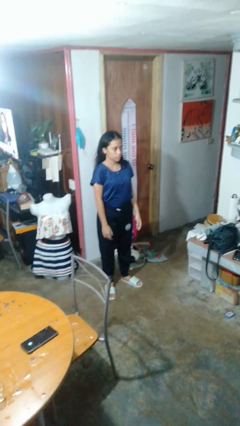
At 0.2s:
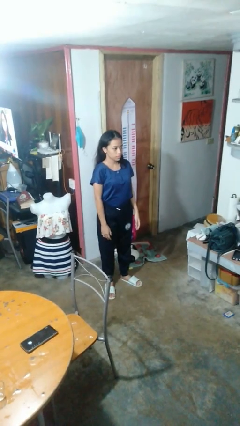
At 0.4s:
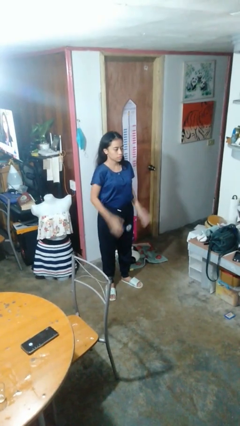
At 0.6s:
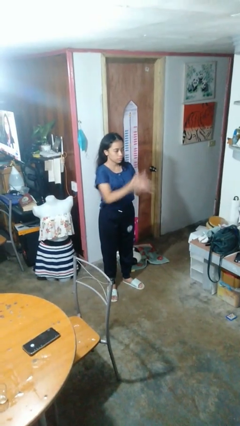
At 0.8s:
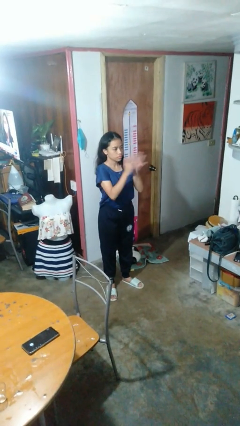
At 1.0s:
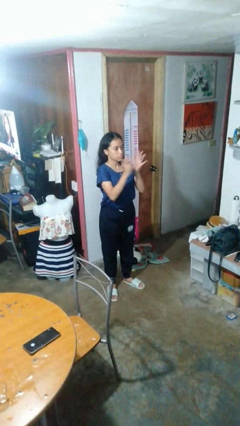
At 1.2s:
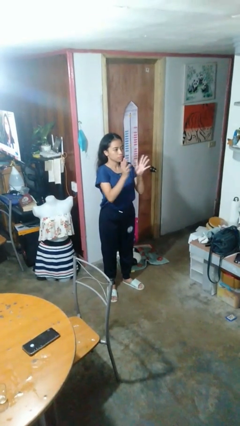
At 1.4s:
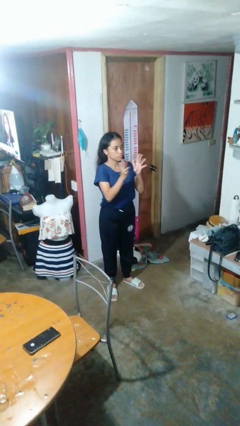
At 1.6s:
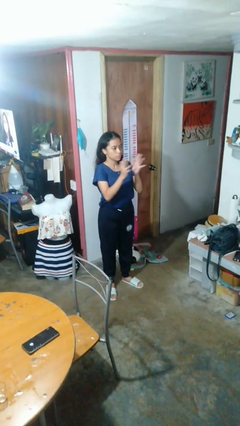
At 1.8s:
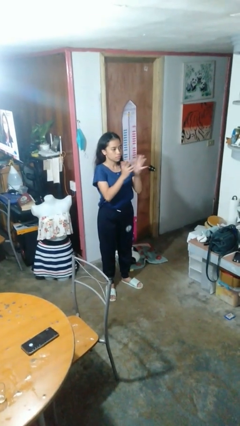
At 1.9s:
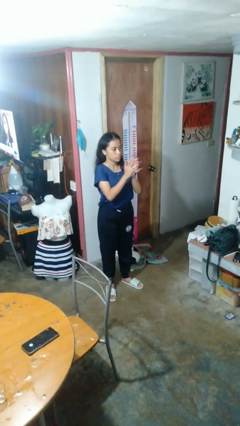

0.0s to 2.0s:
person claps hands

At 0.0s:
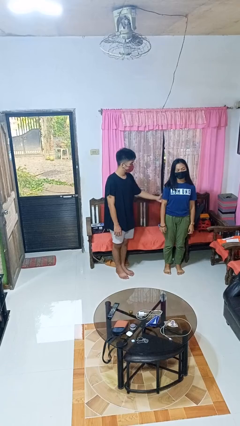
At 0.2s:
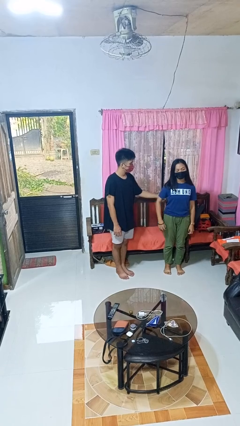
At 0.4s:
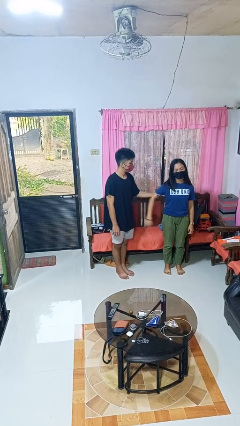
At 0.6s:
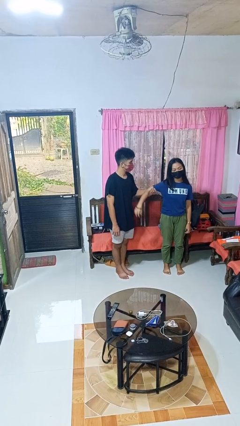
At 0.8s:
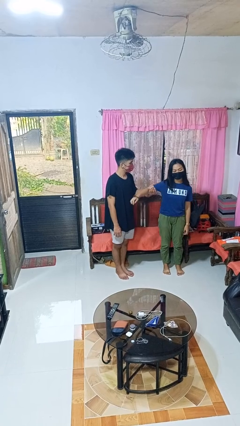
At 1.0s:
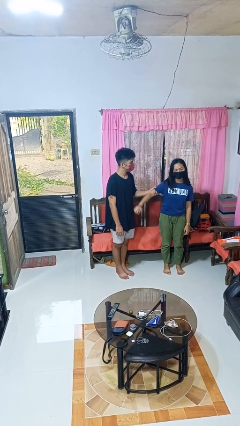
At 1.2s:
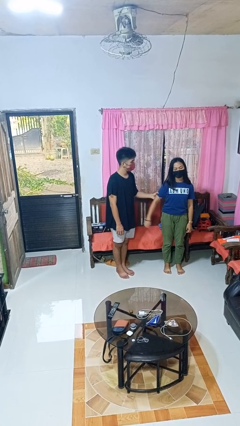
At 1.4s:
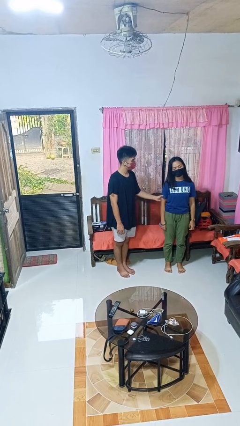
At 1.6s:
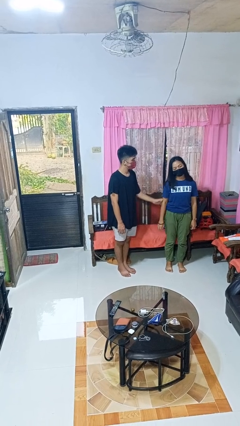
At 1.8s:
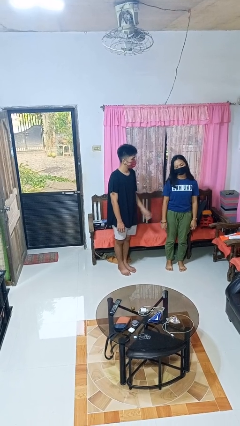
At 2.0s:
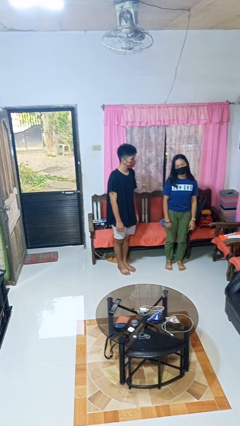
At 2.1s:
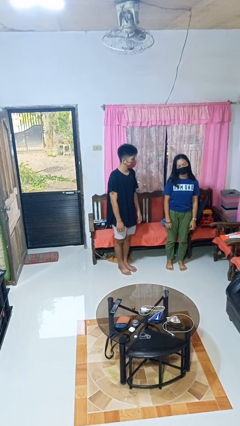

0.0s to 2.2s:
person grabs person by bicep

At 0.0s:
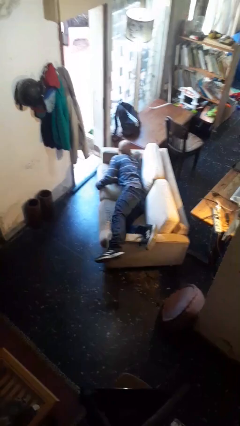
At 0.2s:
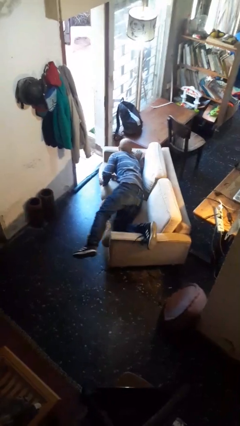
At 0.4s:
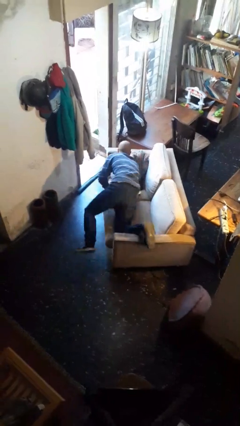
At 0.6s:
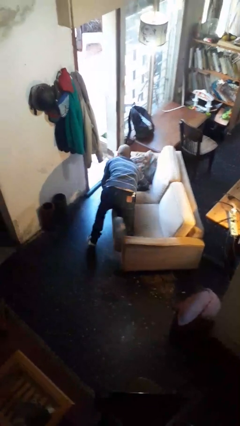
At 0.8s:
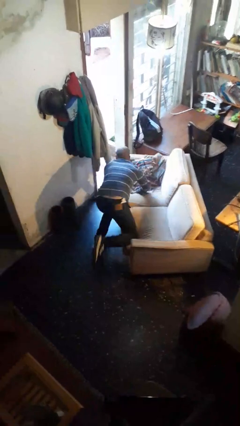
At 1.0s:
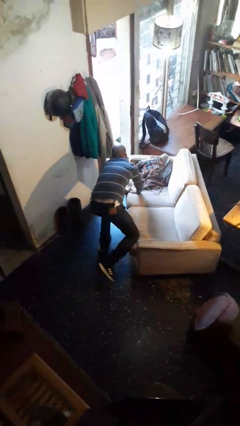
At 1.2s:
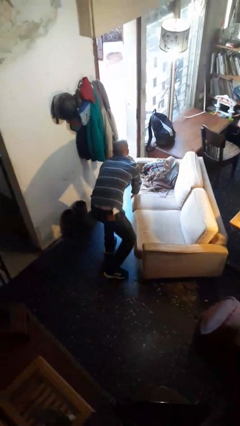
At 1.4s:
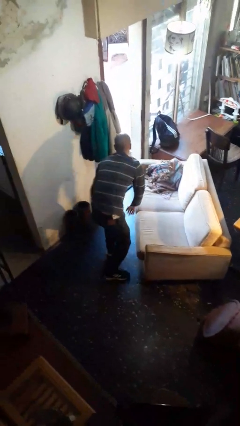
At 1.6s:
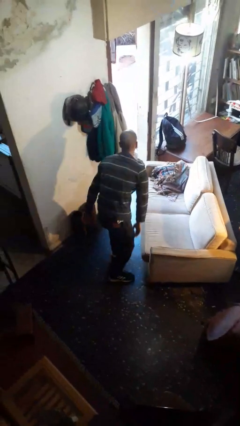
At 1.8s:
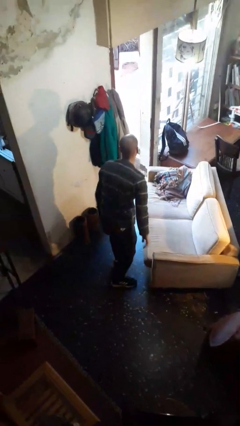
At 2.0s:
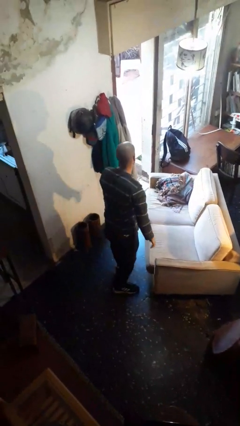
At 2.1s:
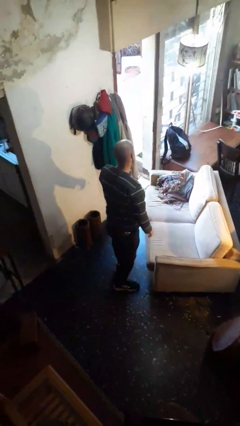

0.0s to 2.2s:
person stands up

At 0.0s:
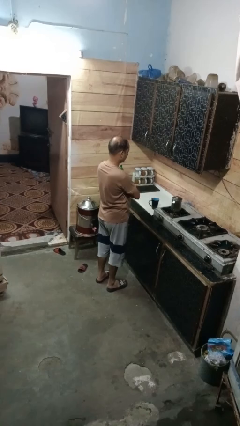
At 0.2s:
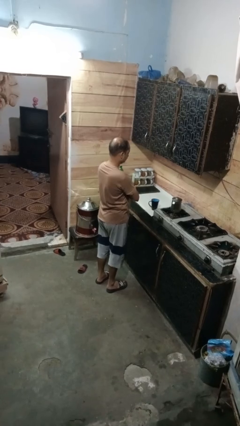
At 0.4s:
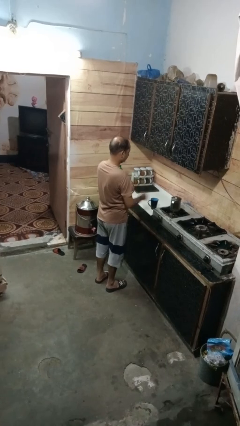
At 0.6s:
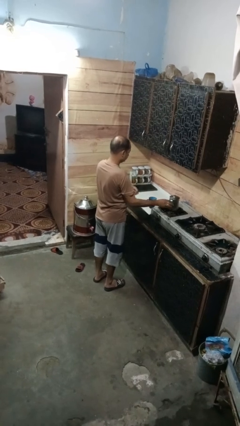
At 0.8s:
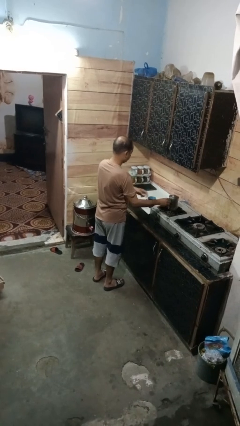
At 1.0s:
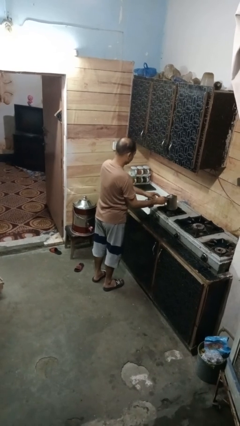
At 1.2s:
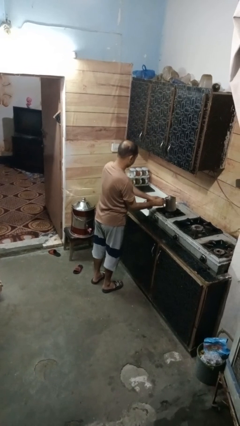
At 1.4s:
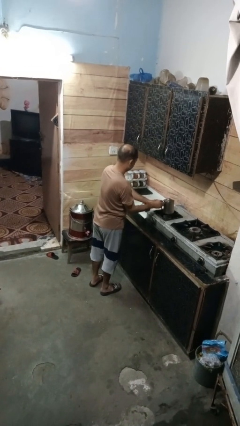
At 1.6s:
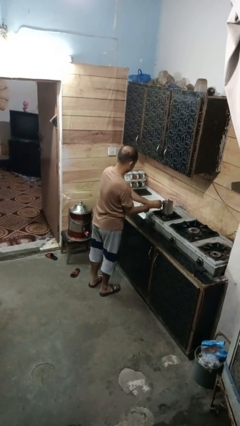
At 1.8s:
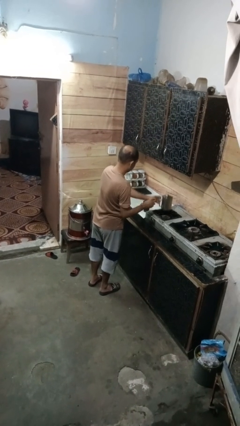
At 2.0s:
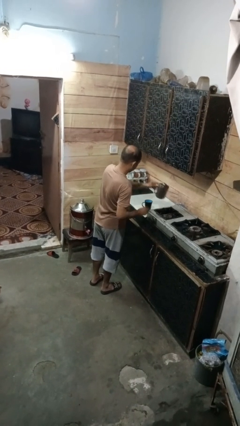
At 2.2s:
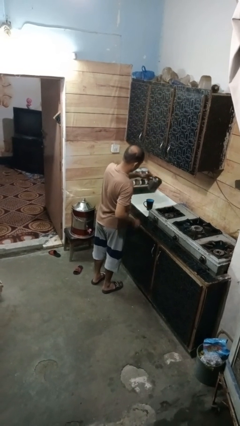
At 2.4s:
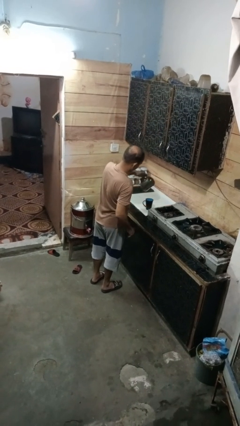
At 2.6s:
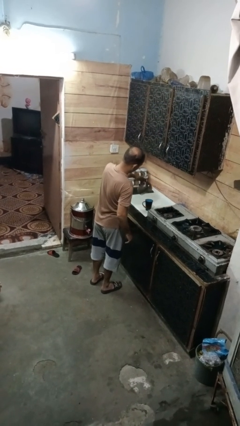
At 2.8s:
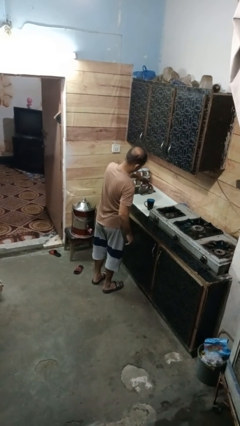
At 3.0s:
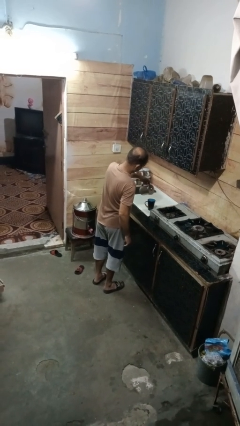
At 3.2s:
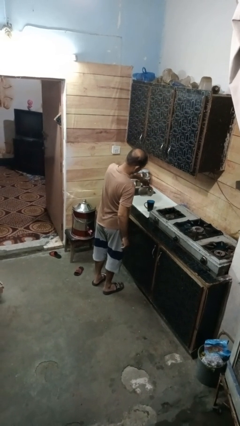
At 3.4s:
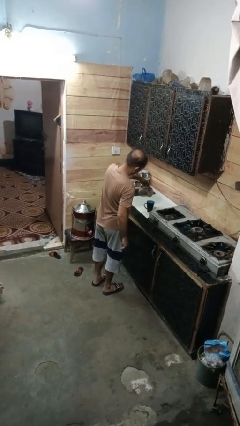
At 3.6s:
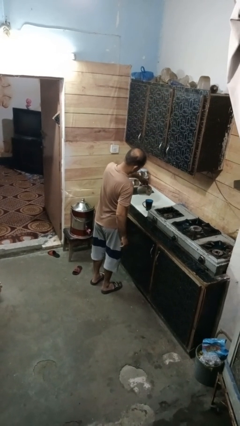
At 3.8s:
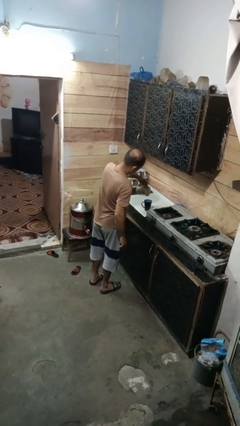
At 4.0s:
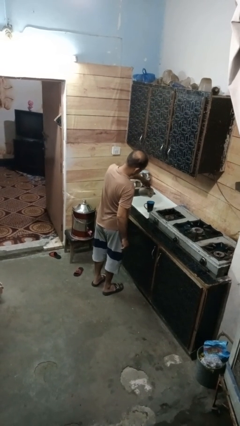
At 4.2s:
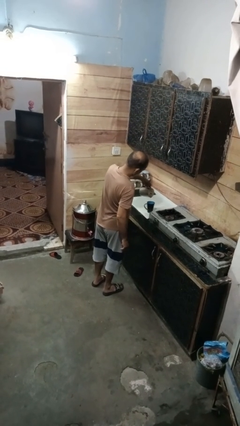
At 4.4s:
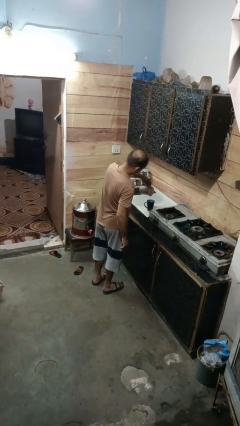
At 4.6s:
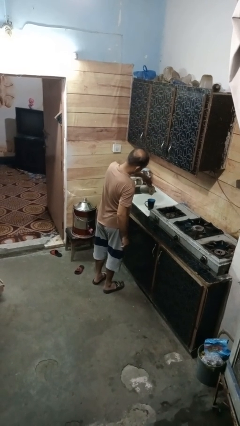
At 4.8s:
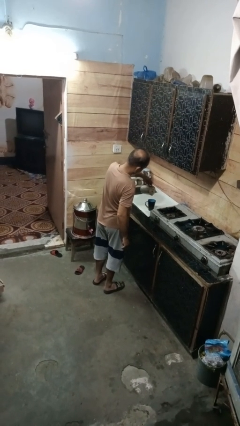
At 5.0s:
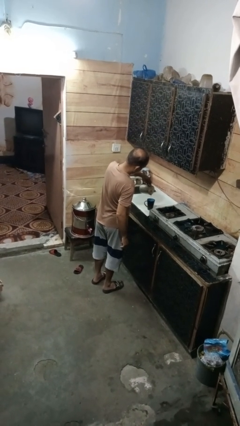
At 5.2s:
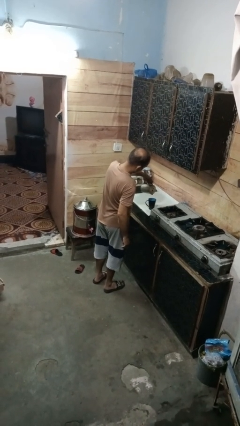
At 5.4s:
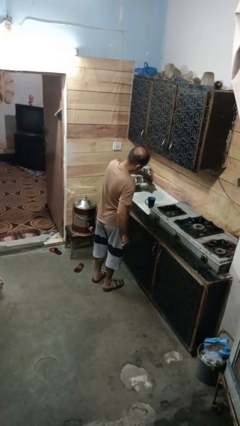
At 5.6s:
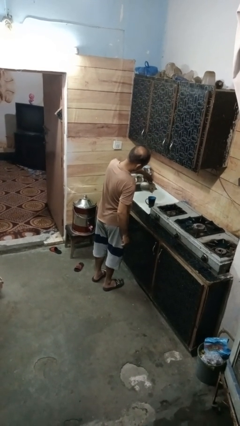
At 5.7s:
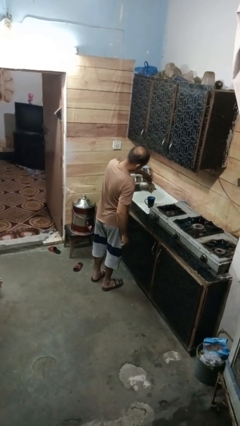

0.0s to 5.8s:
person pours coffee into mug

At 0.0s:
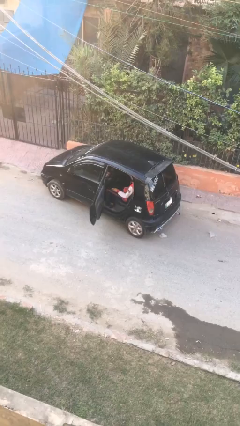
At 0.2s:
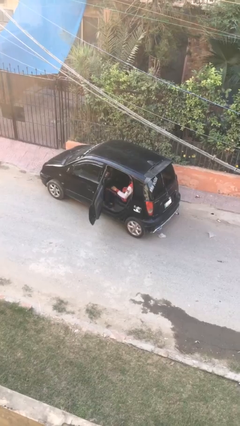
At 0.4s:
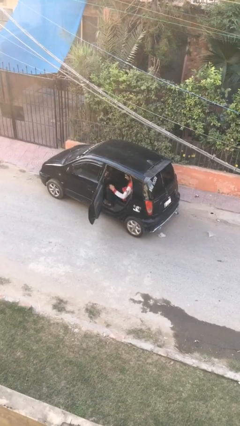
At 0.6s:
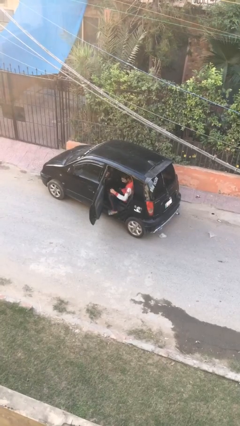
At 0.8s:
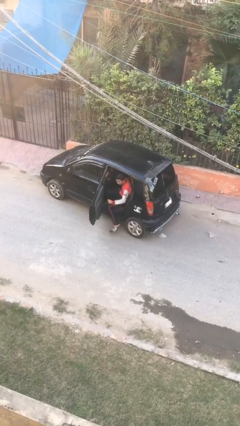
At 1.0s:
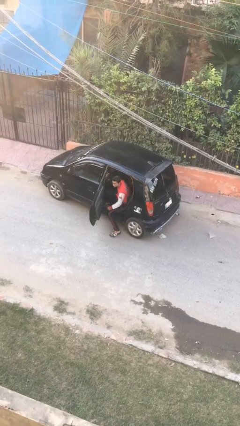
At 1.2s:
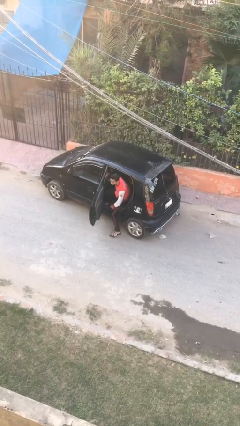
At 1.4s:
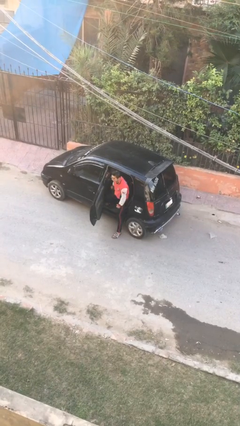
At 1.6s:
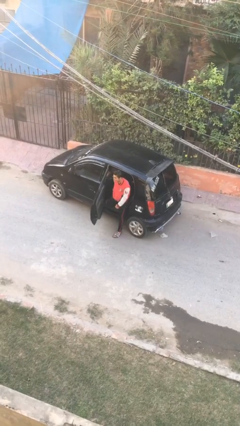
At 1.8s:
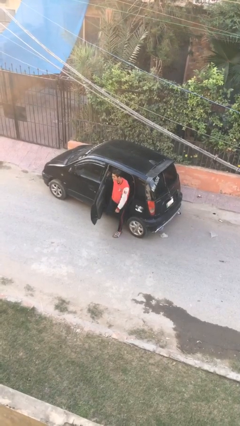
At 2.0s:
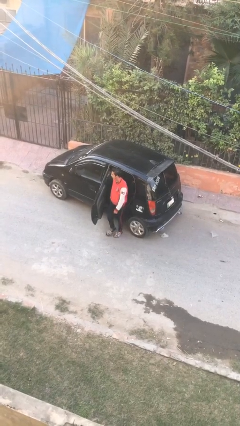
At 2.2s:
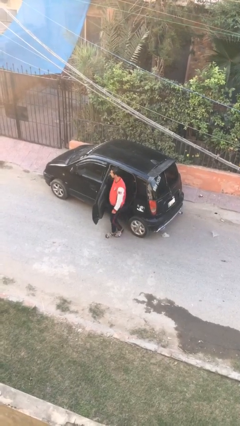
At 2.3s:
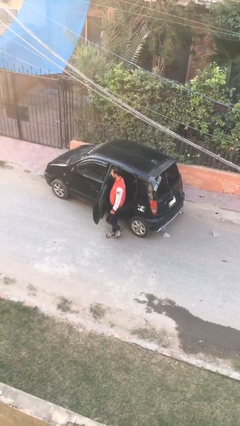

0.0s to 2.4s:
person exits car

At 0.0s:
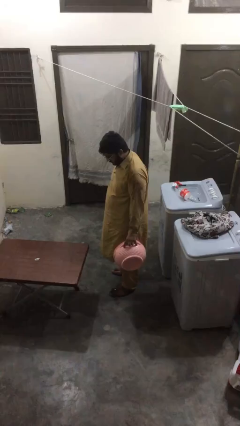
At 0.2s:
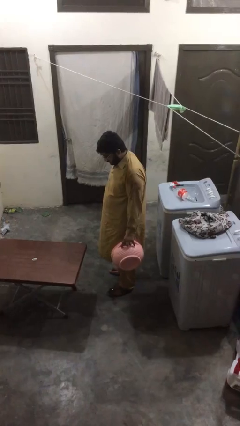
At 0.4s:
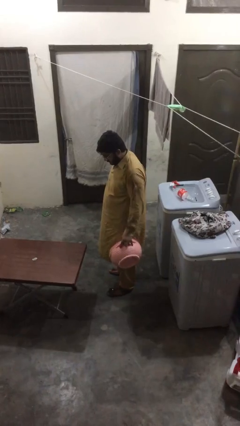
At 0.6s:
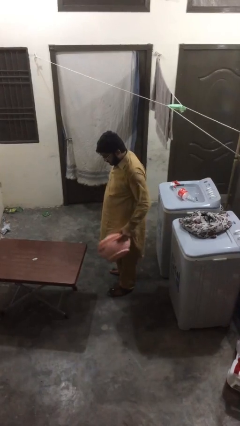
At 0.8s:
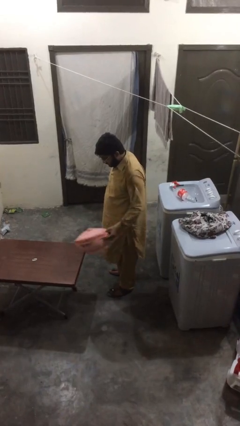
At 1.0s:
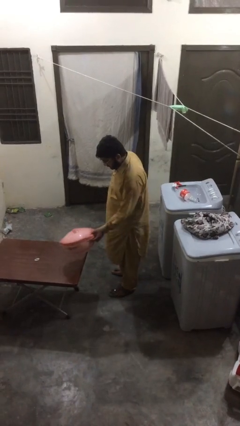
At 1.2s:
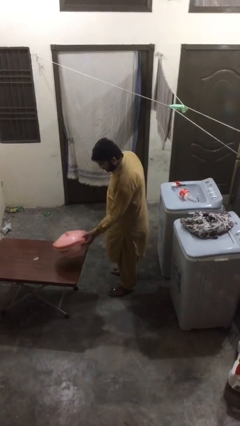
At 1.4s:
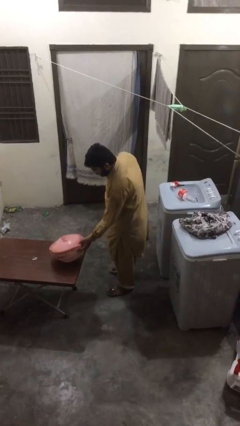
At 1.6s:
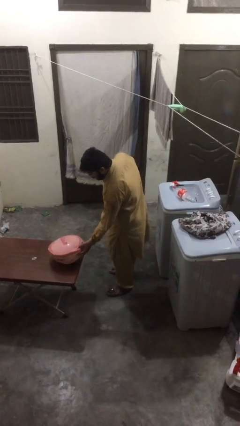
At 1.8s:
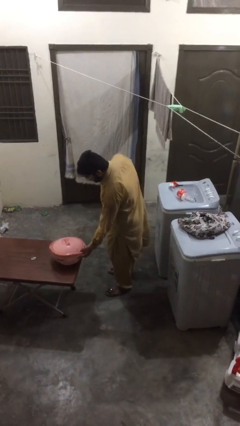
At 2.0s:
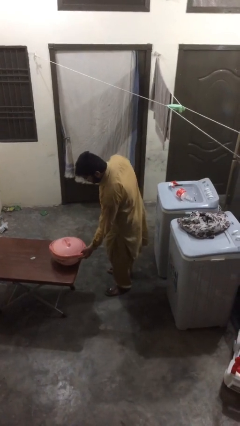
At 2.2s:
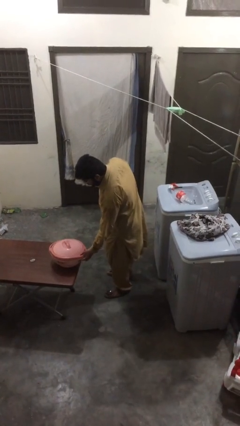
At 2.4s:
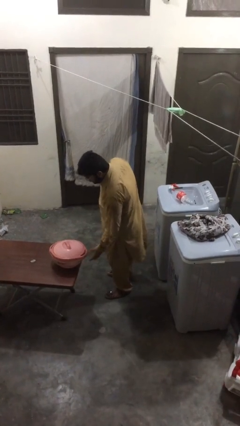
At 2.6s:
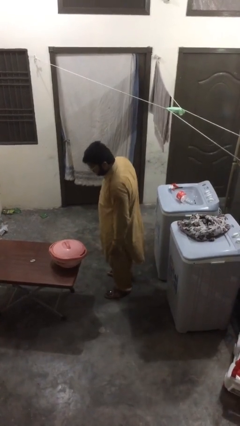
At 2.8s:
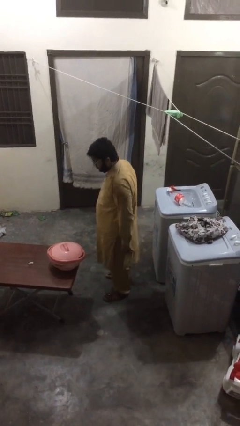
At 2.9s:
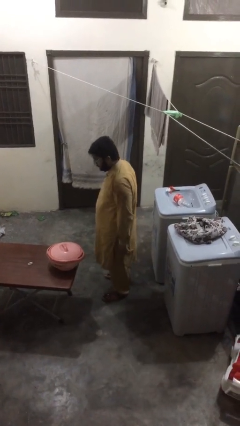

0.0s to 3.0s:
person puts down object on table
